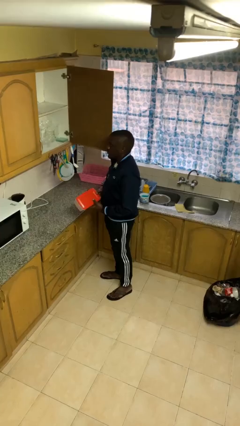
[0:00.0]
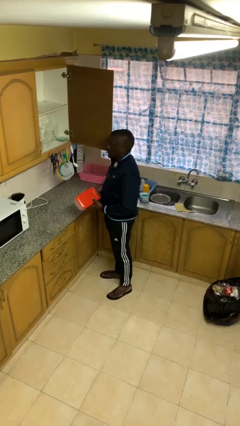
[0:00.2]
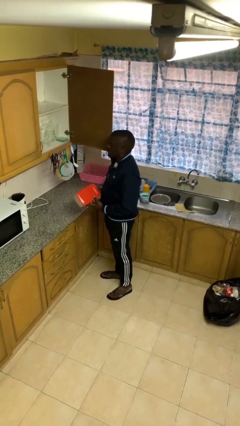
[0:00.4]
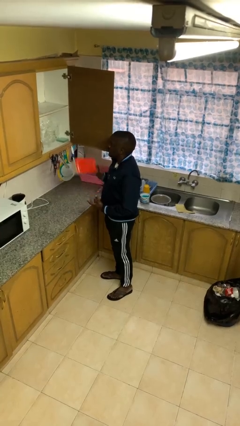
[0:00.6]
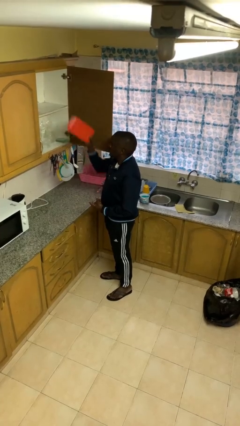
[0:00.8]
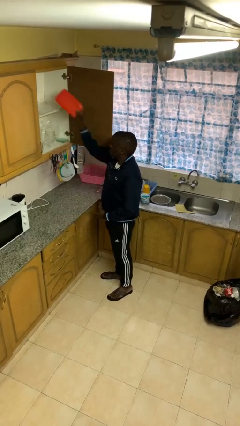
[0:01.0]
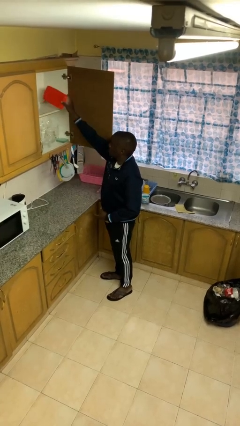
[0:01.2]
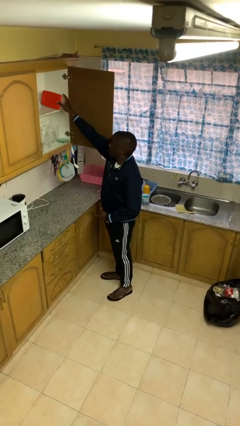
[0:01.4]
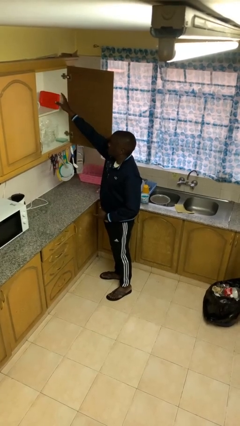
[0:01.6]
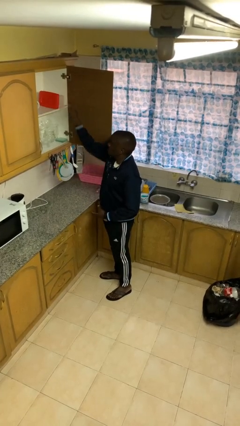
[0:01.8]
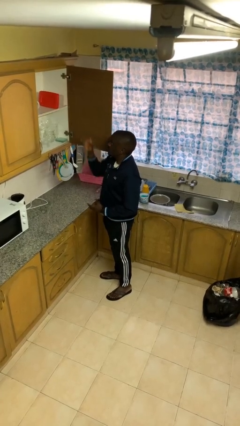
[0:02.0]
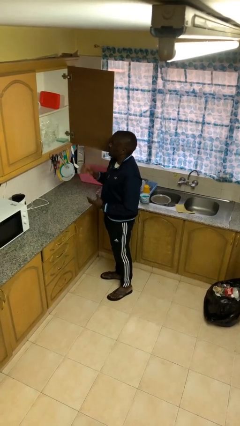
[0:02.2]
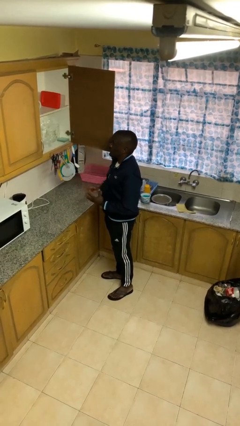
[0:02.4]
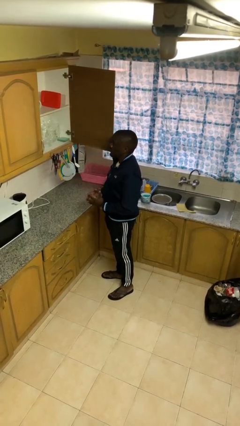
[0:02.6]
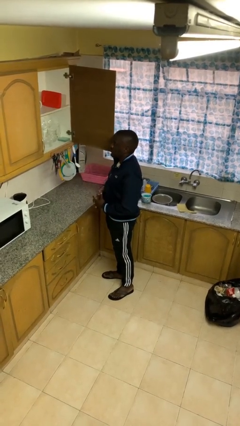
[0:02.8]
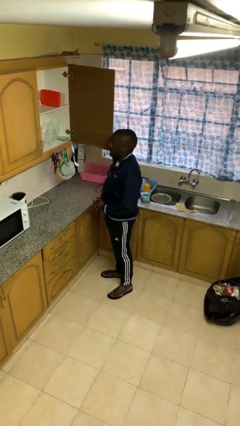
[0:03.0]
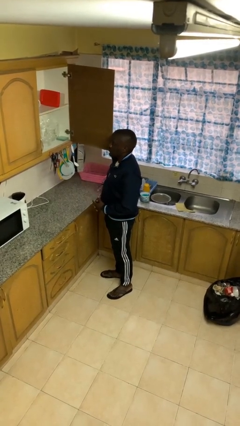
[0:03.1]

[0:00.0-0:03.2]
person puts down object on shelf

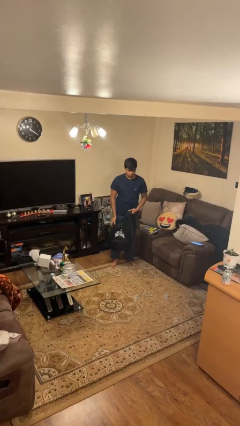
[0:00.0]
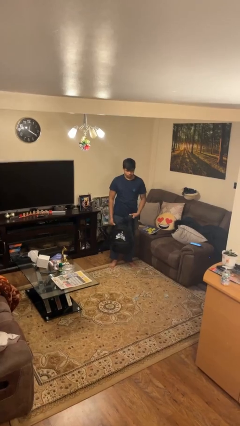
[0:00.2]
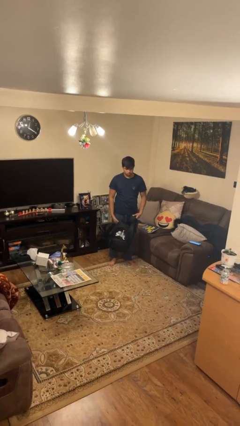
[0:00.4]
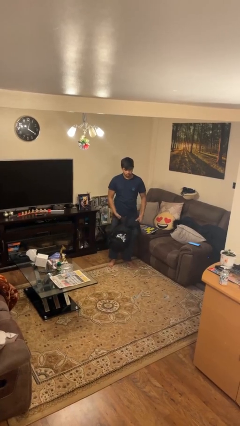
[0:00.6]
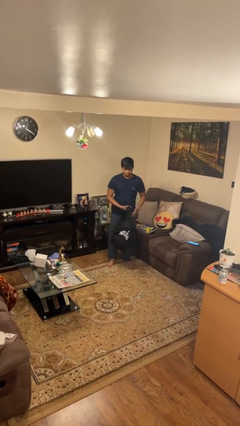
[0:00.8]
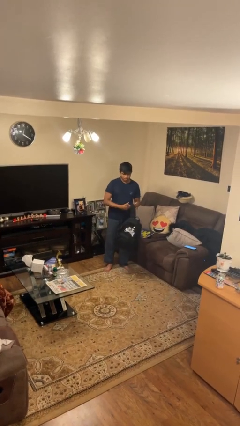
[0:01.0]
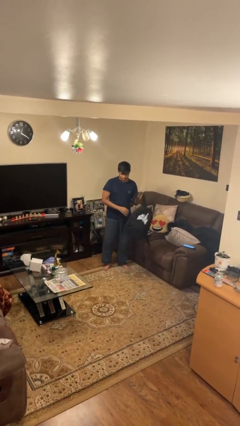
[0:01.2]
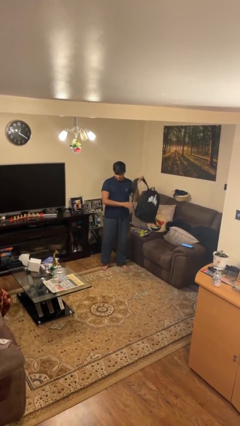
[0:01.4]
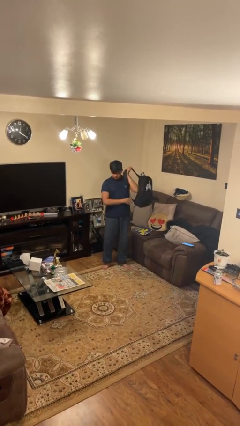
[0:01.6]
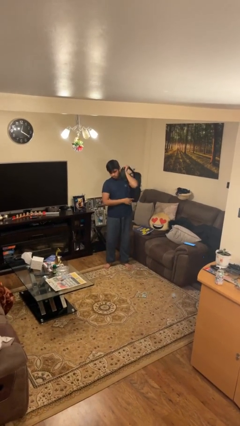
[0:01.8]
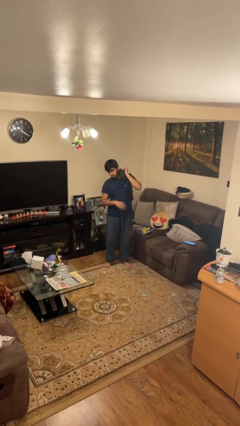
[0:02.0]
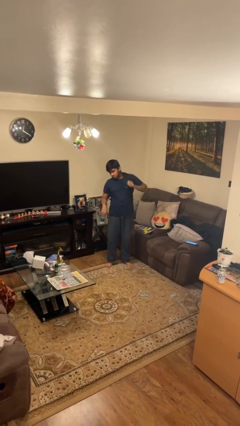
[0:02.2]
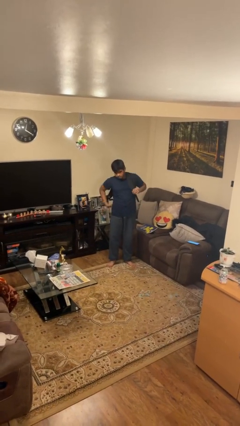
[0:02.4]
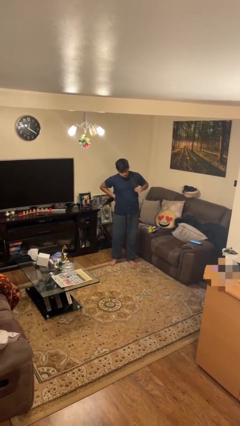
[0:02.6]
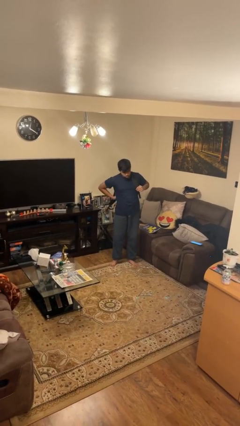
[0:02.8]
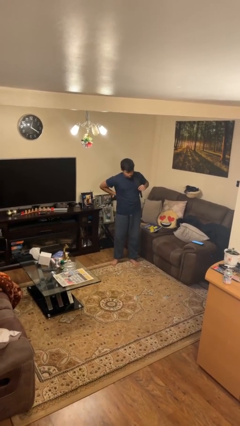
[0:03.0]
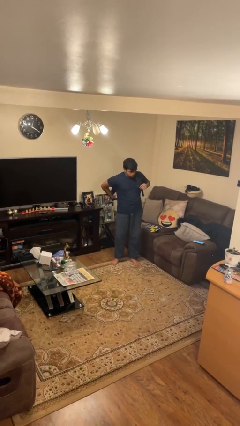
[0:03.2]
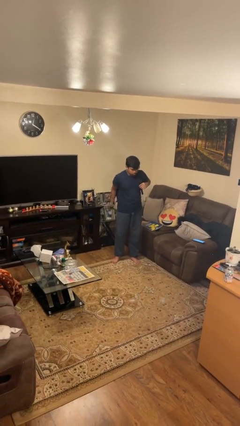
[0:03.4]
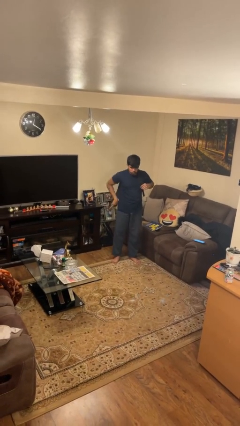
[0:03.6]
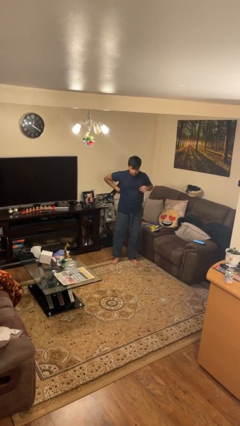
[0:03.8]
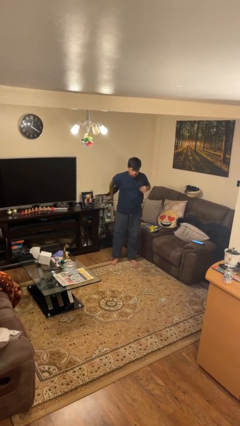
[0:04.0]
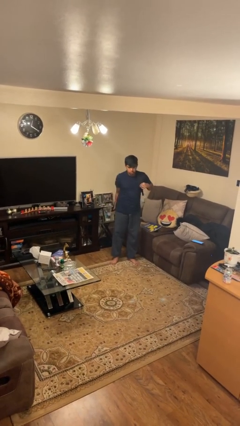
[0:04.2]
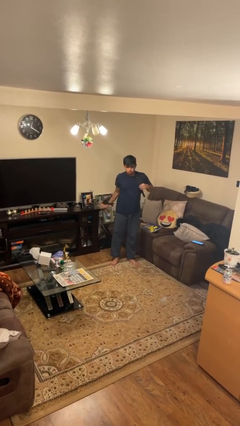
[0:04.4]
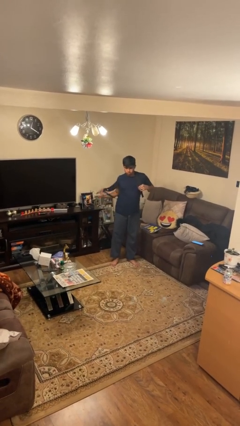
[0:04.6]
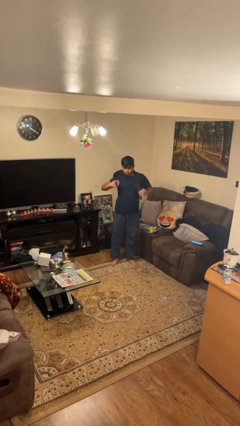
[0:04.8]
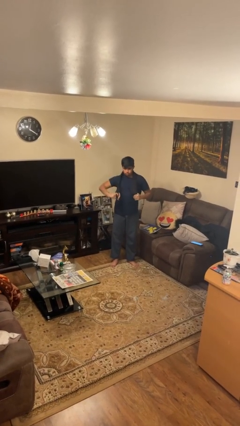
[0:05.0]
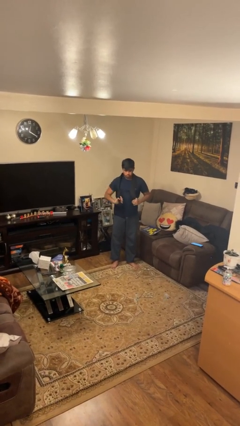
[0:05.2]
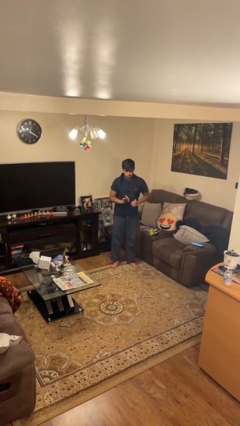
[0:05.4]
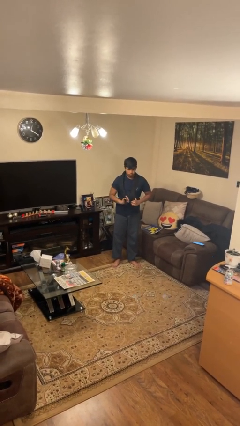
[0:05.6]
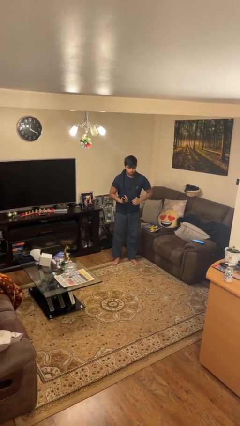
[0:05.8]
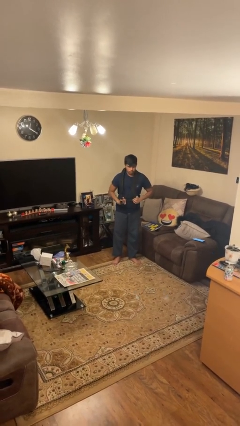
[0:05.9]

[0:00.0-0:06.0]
person puts on backpack

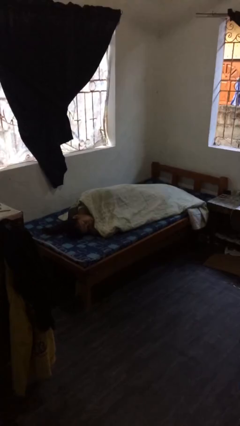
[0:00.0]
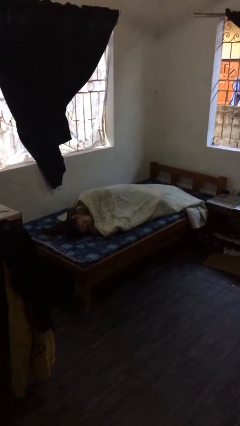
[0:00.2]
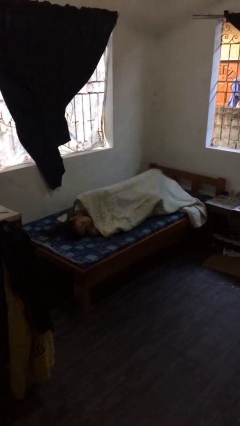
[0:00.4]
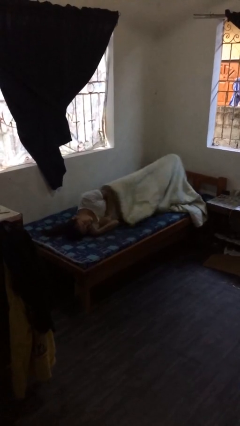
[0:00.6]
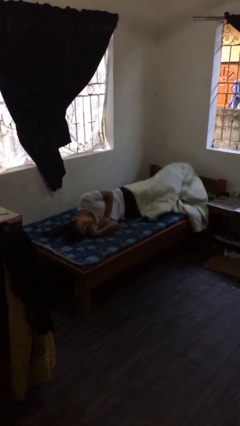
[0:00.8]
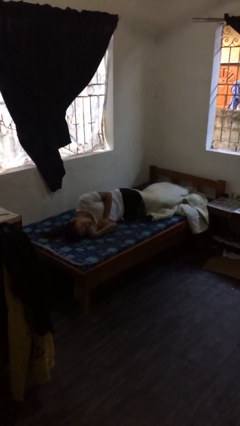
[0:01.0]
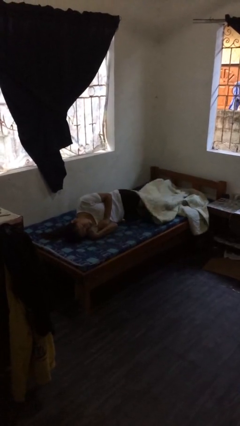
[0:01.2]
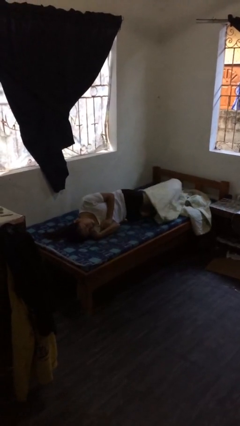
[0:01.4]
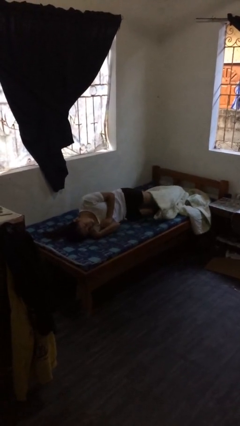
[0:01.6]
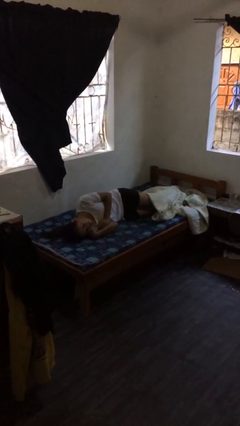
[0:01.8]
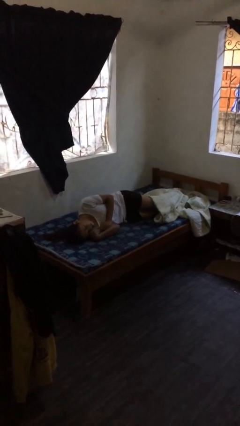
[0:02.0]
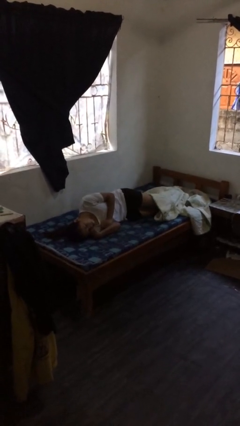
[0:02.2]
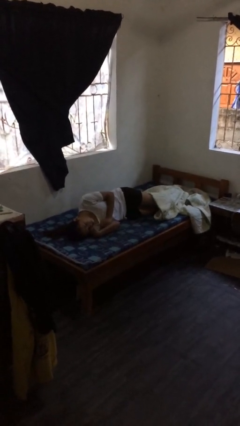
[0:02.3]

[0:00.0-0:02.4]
person uncovers with bedsheets

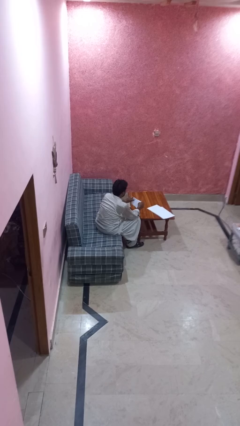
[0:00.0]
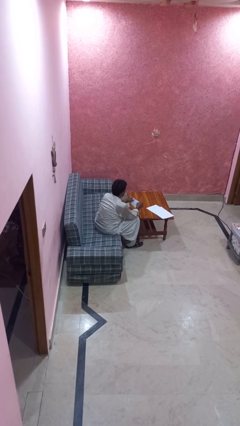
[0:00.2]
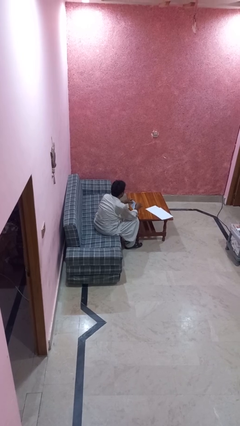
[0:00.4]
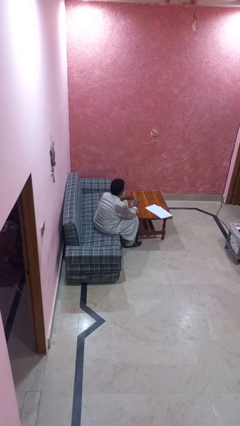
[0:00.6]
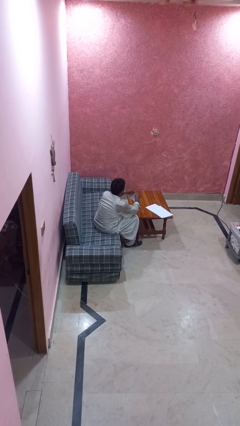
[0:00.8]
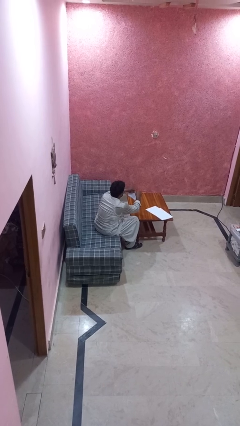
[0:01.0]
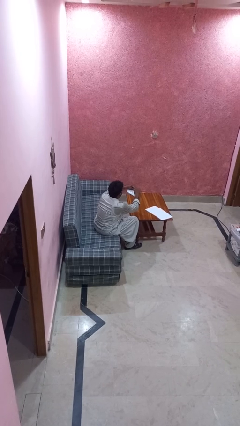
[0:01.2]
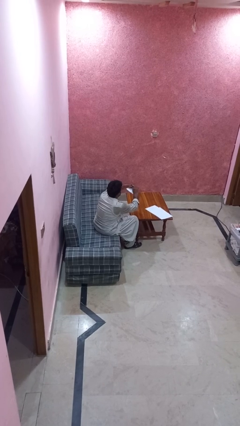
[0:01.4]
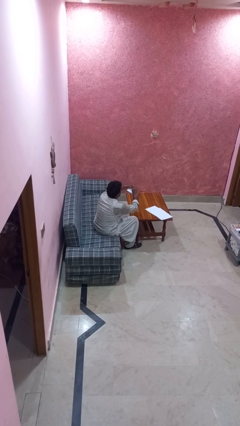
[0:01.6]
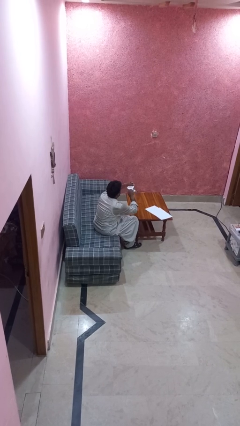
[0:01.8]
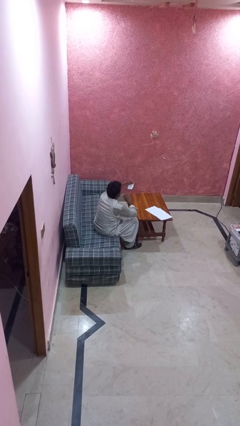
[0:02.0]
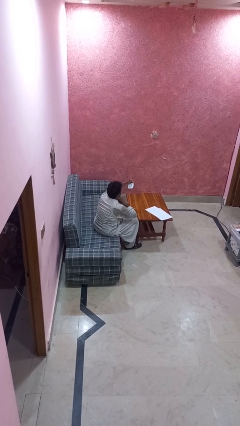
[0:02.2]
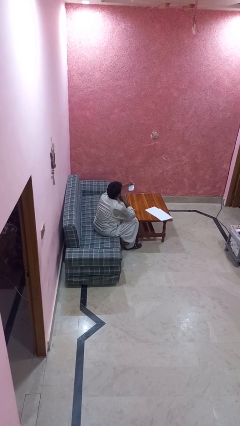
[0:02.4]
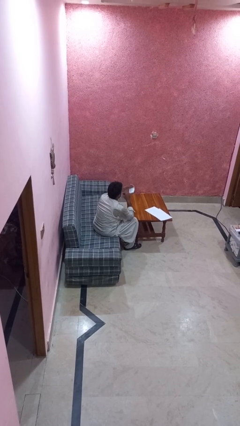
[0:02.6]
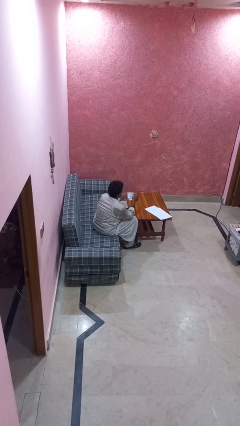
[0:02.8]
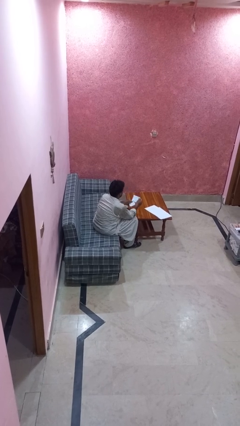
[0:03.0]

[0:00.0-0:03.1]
person tears paper

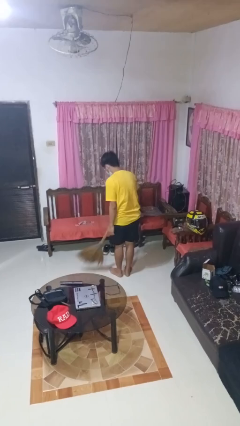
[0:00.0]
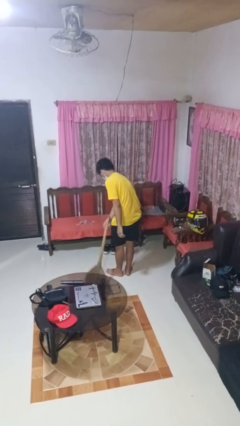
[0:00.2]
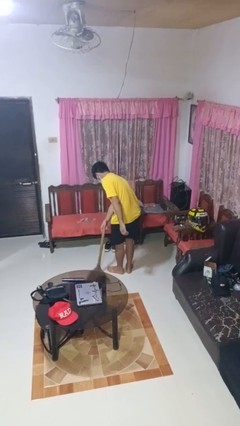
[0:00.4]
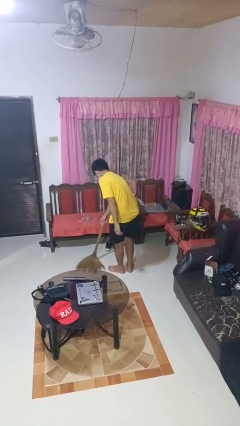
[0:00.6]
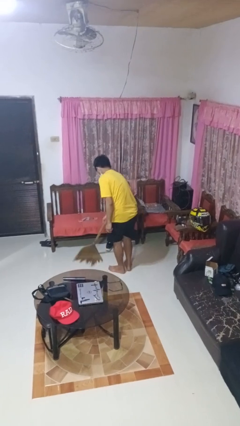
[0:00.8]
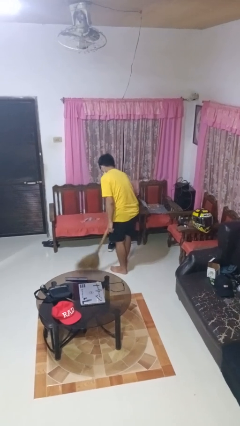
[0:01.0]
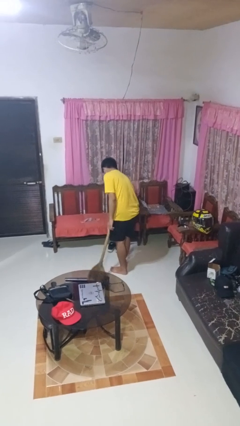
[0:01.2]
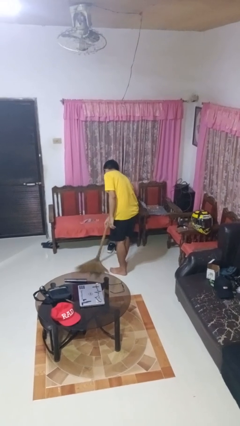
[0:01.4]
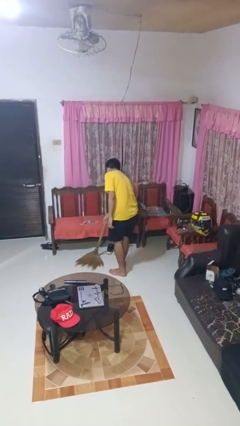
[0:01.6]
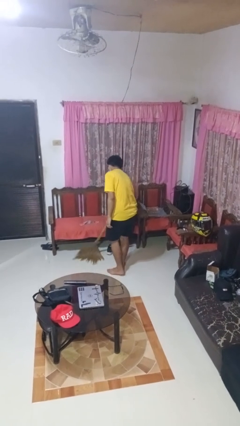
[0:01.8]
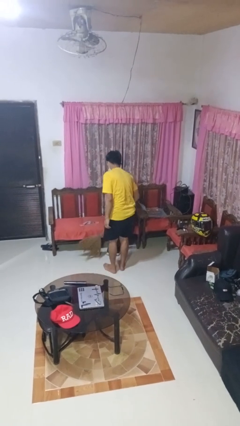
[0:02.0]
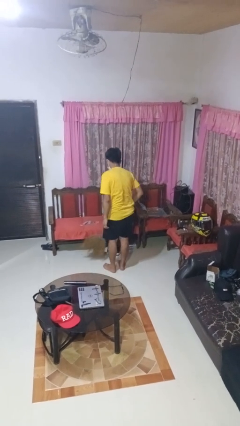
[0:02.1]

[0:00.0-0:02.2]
person sweeps floor

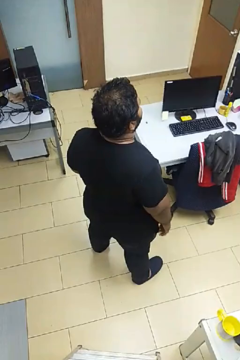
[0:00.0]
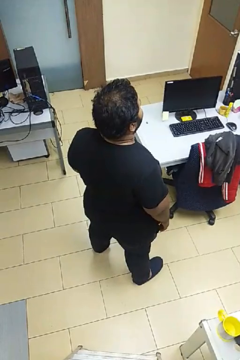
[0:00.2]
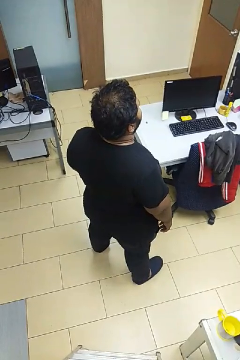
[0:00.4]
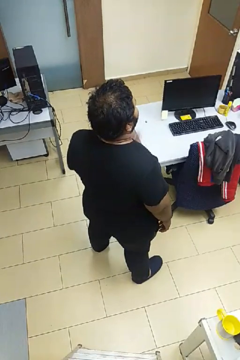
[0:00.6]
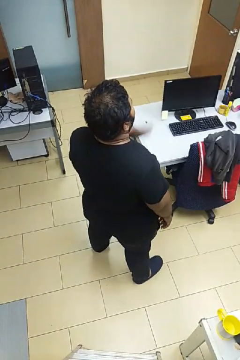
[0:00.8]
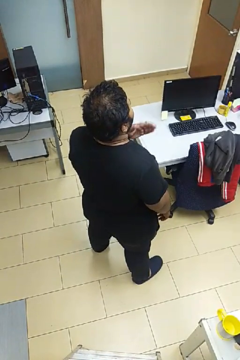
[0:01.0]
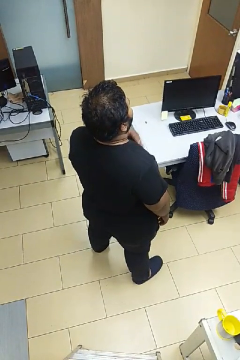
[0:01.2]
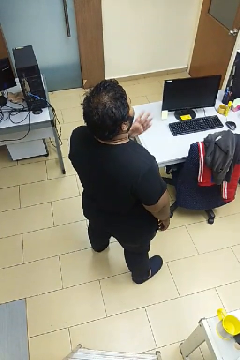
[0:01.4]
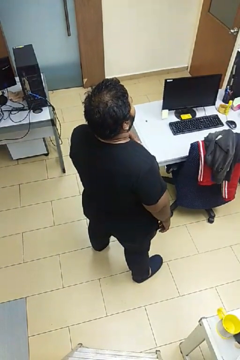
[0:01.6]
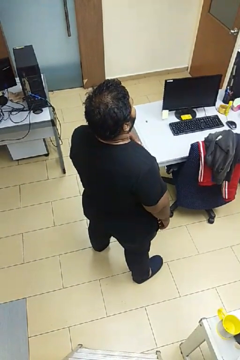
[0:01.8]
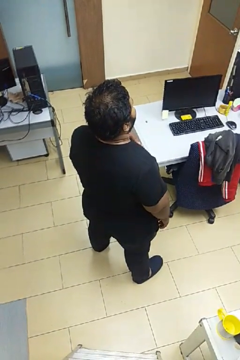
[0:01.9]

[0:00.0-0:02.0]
person drums on chest
